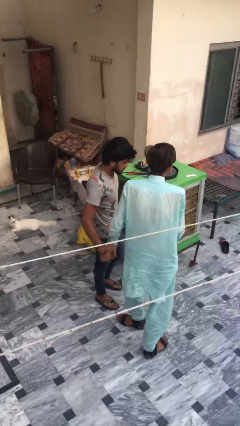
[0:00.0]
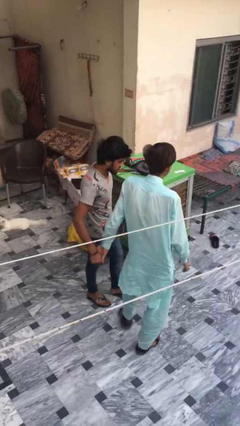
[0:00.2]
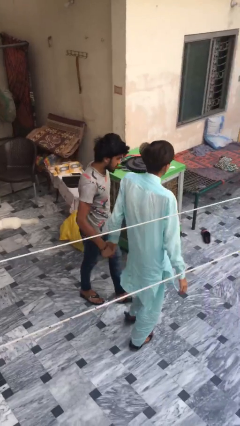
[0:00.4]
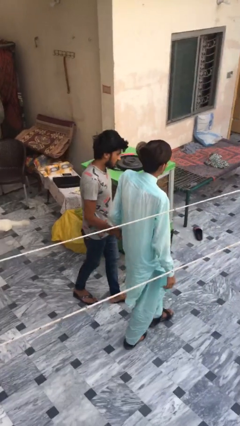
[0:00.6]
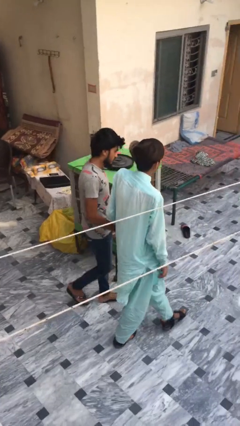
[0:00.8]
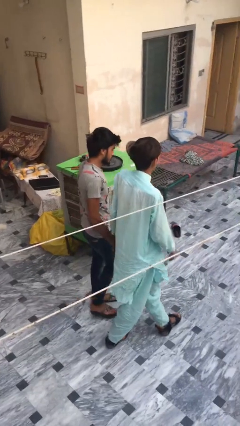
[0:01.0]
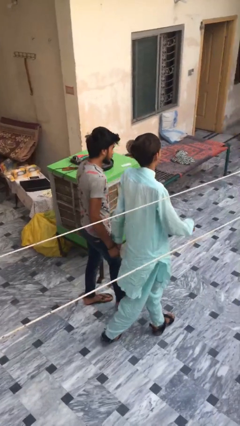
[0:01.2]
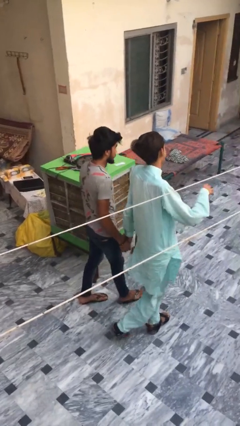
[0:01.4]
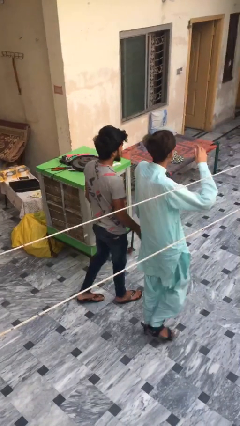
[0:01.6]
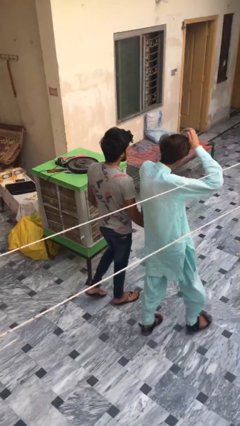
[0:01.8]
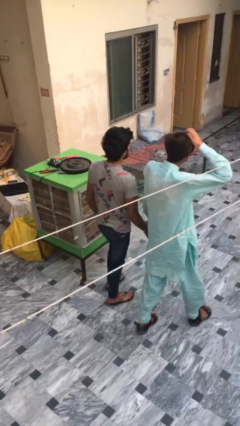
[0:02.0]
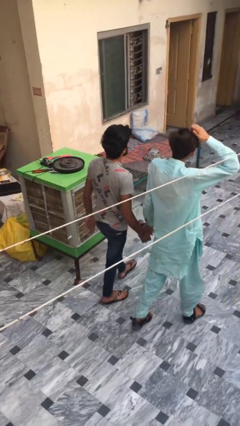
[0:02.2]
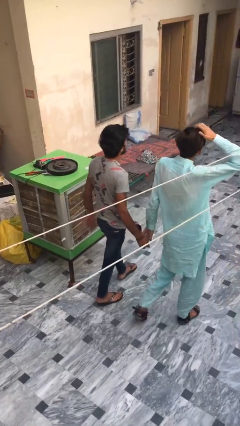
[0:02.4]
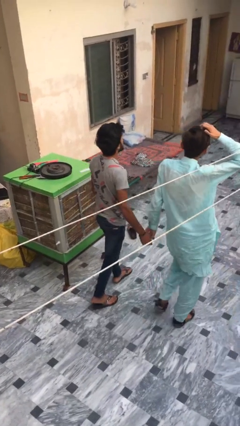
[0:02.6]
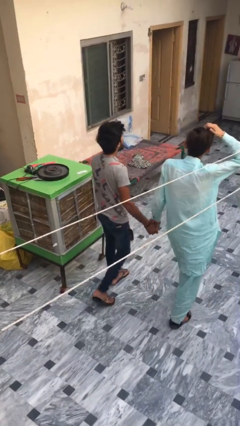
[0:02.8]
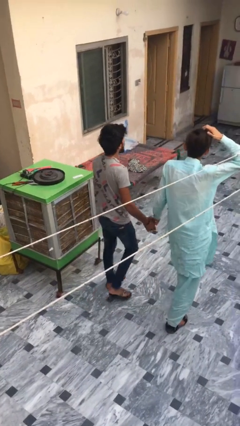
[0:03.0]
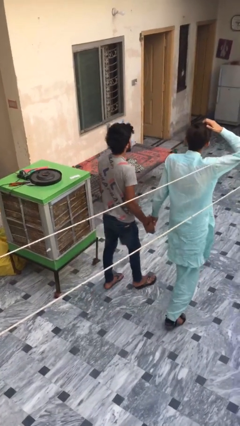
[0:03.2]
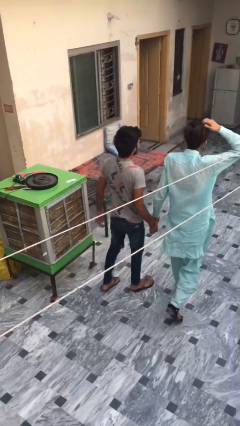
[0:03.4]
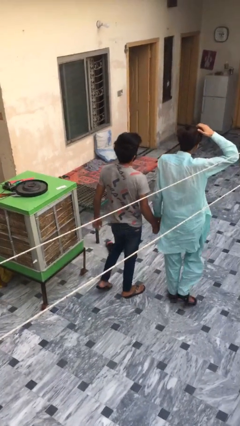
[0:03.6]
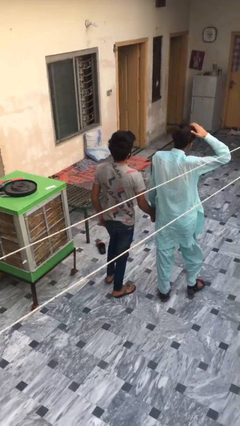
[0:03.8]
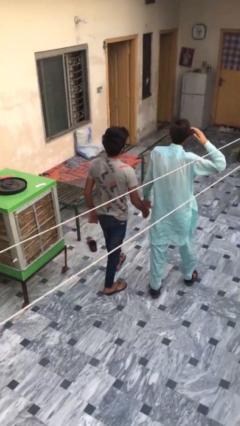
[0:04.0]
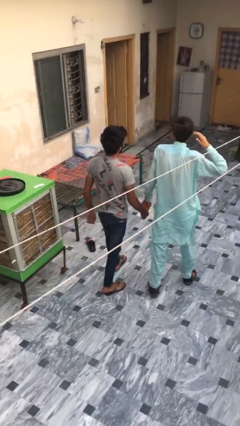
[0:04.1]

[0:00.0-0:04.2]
person talks to person

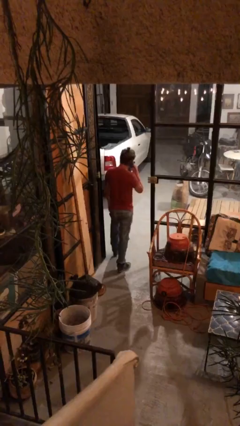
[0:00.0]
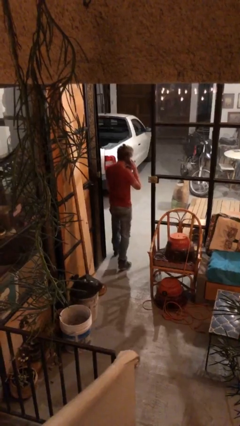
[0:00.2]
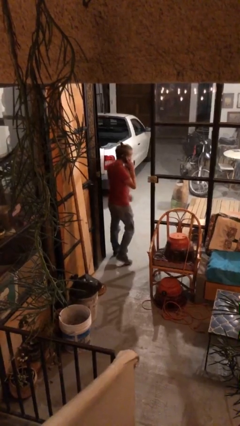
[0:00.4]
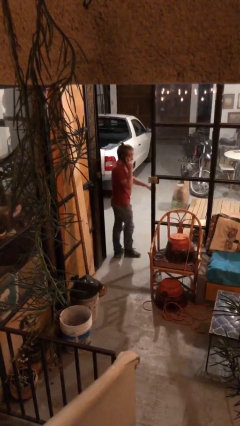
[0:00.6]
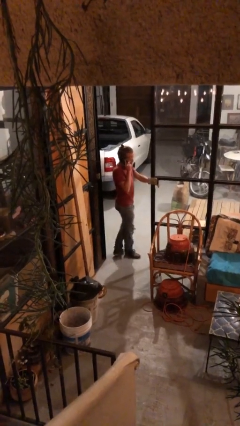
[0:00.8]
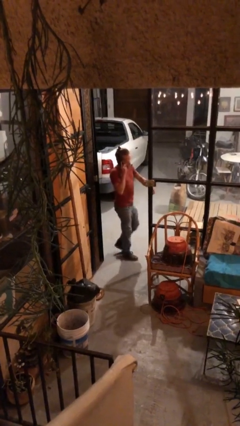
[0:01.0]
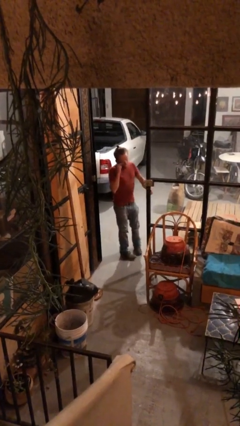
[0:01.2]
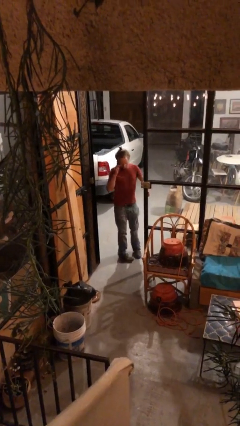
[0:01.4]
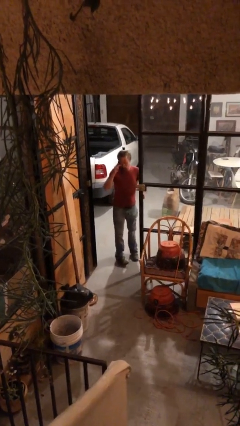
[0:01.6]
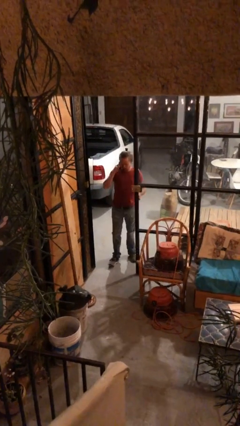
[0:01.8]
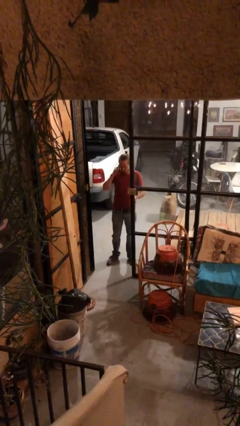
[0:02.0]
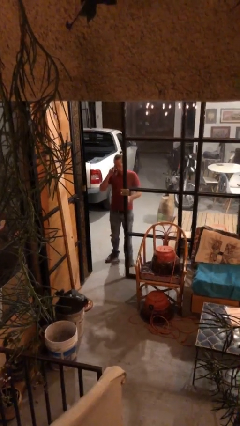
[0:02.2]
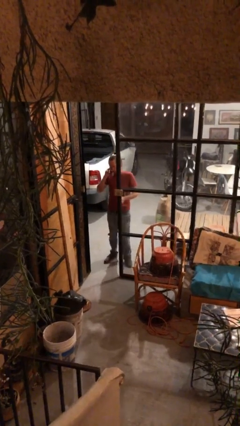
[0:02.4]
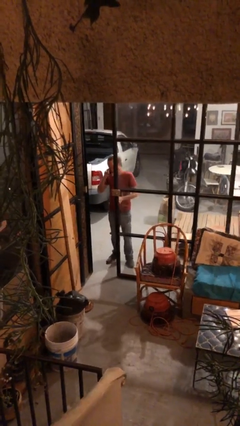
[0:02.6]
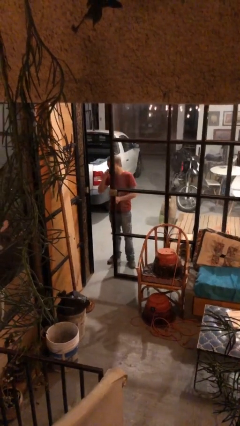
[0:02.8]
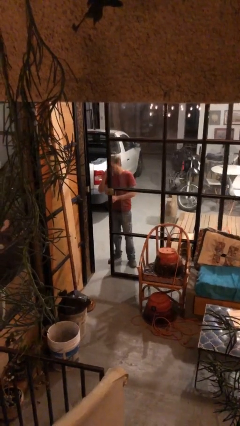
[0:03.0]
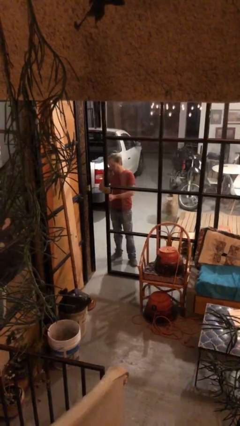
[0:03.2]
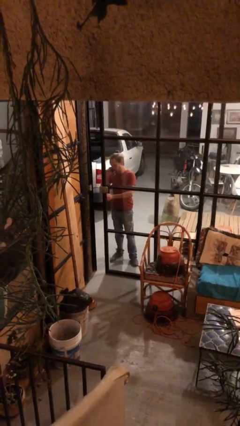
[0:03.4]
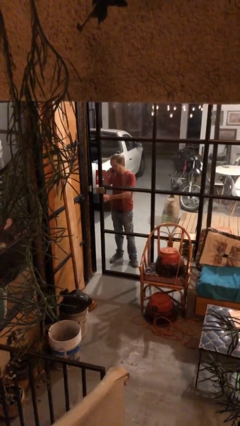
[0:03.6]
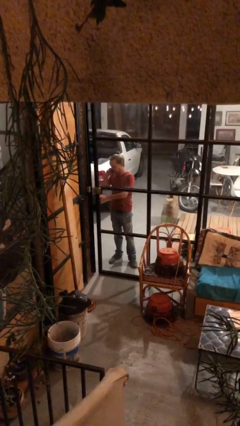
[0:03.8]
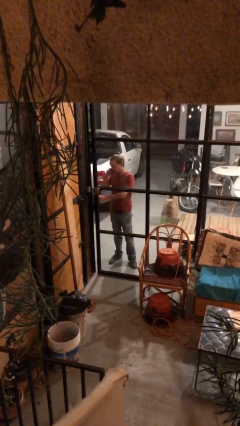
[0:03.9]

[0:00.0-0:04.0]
person closes facility door

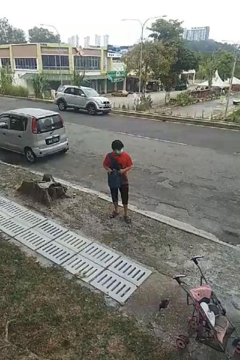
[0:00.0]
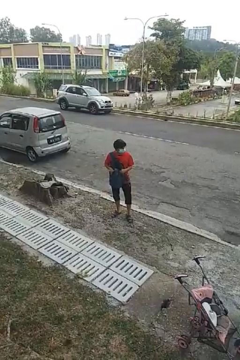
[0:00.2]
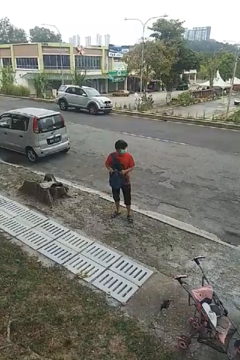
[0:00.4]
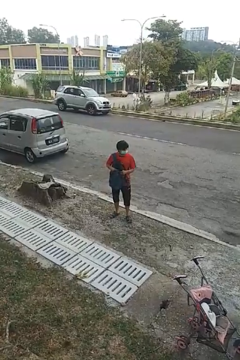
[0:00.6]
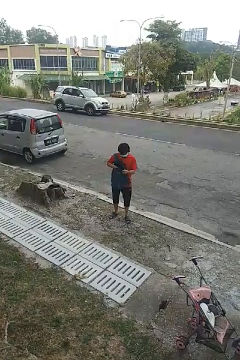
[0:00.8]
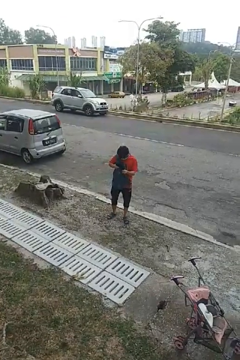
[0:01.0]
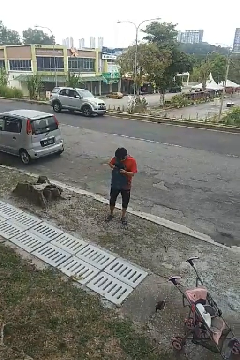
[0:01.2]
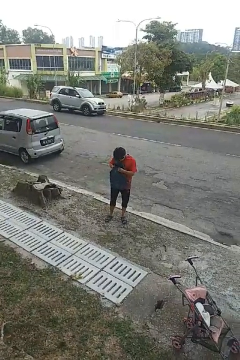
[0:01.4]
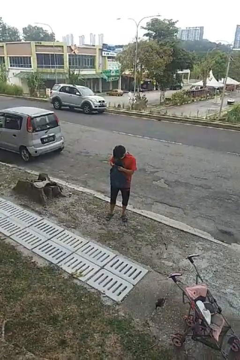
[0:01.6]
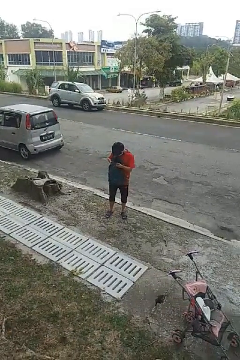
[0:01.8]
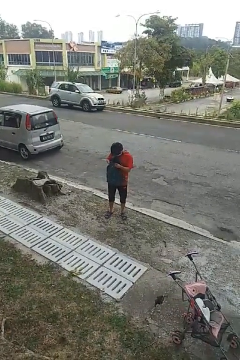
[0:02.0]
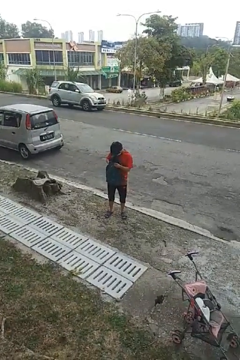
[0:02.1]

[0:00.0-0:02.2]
person searches in backpack

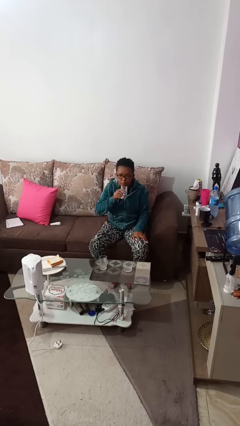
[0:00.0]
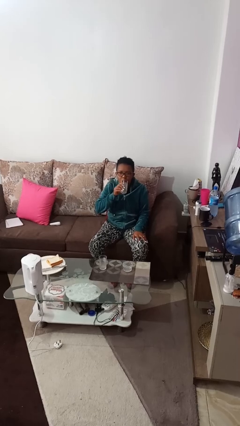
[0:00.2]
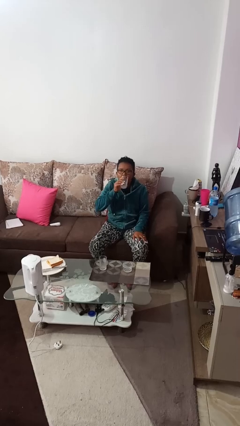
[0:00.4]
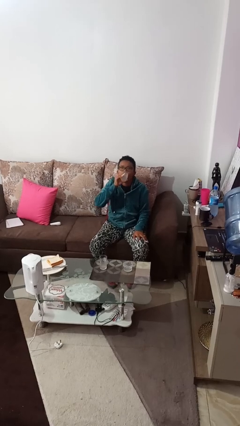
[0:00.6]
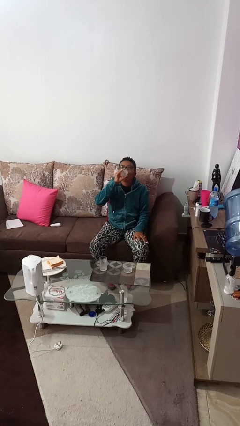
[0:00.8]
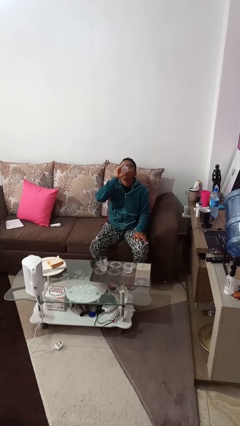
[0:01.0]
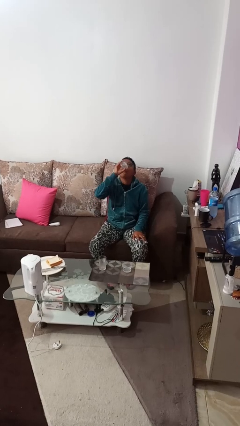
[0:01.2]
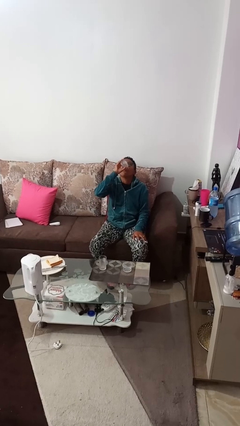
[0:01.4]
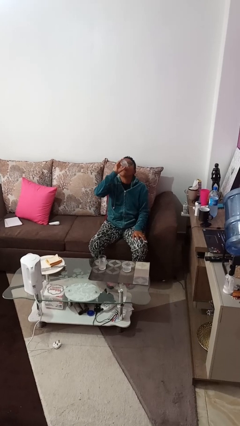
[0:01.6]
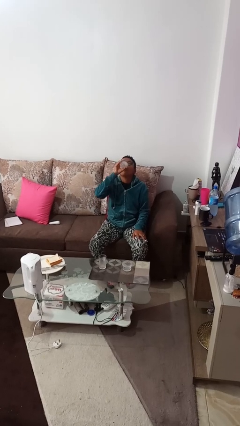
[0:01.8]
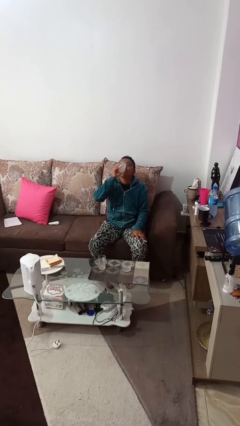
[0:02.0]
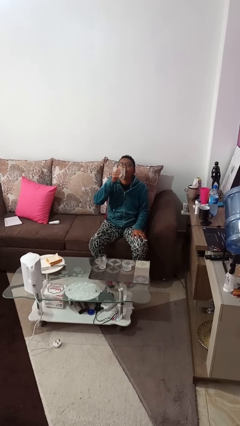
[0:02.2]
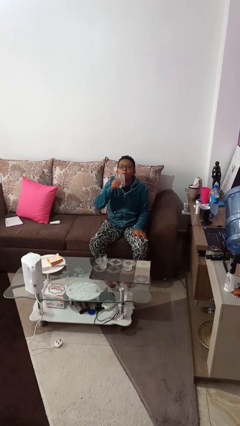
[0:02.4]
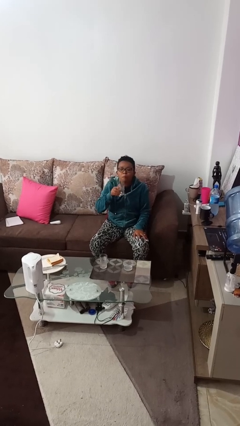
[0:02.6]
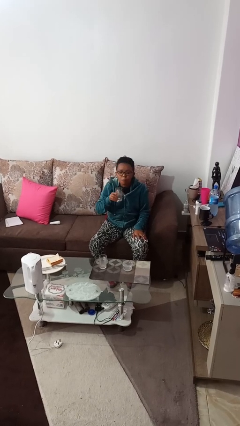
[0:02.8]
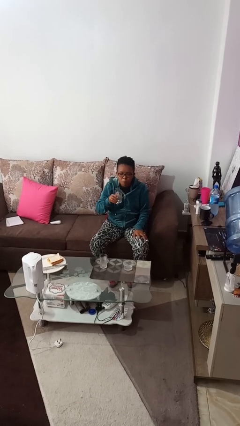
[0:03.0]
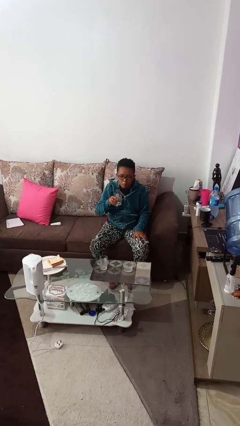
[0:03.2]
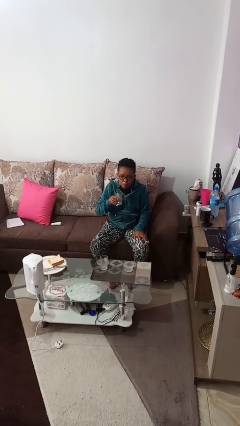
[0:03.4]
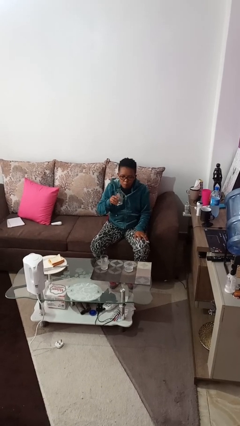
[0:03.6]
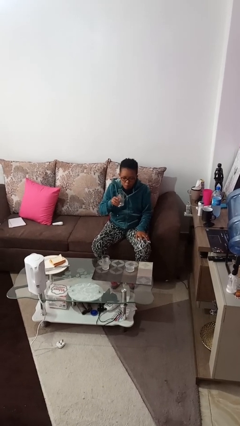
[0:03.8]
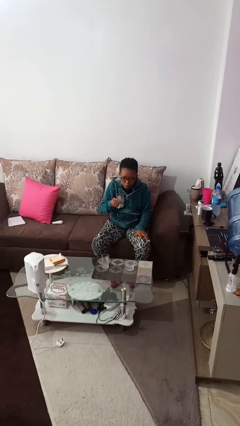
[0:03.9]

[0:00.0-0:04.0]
person drinks from shotglass

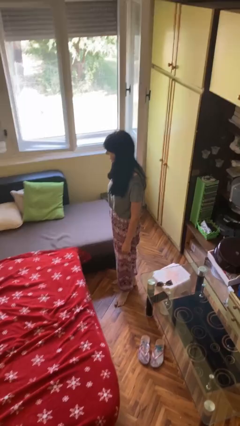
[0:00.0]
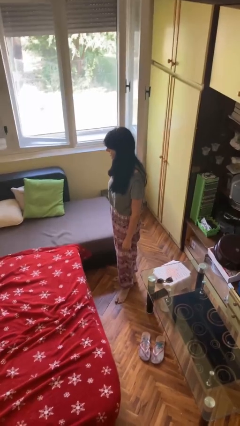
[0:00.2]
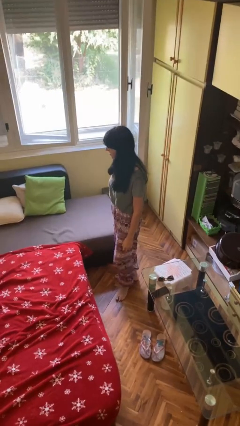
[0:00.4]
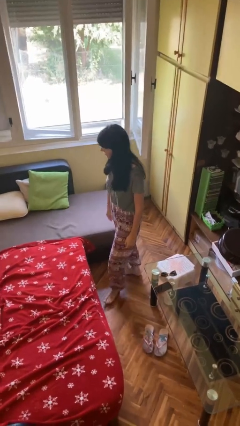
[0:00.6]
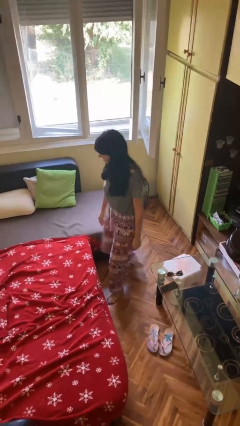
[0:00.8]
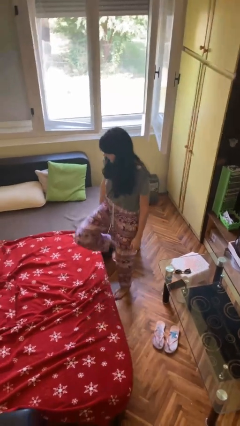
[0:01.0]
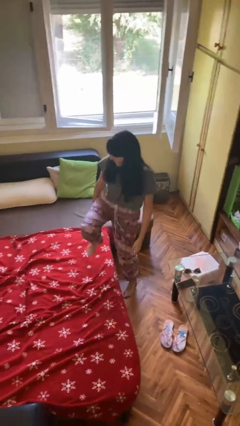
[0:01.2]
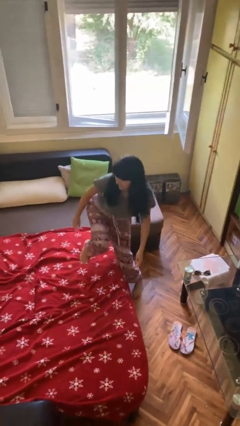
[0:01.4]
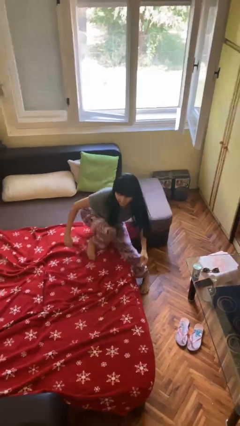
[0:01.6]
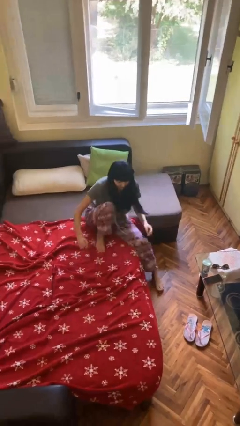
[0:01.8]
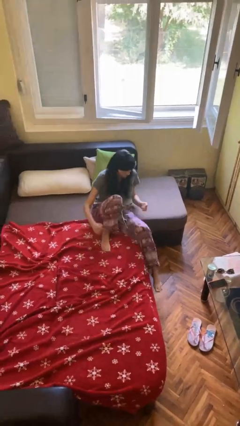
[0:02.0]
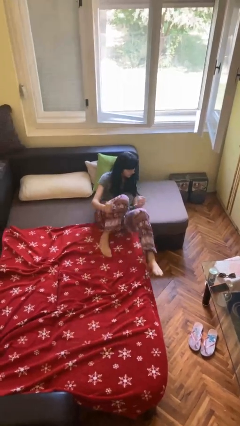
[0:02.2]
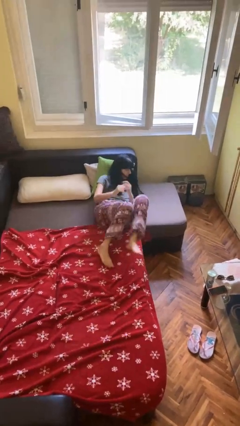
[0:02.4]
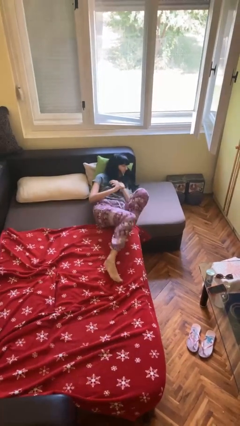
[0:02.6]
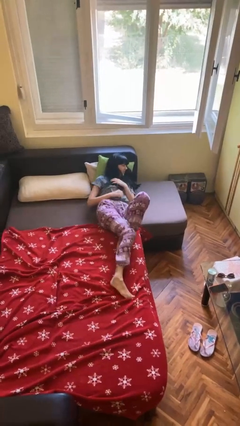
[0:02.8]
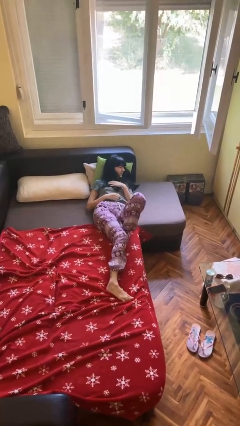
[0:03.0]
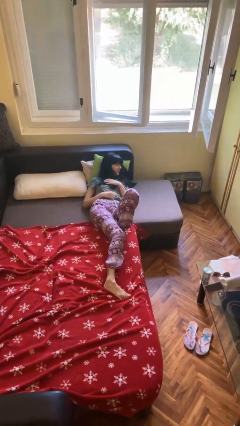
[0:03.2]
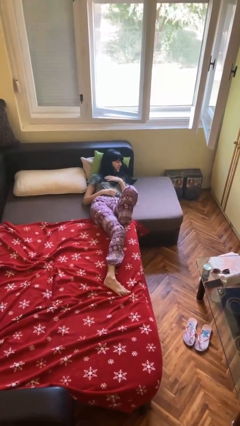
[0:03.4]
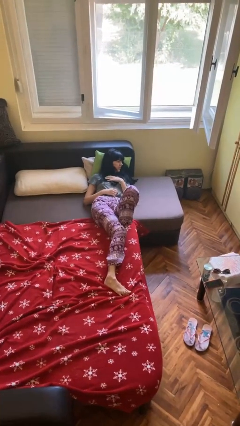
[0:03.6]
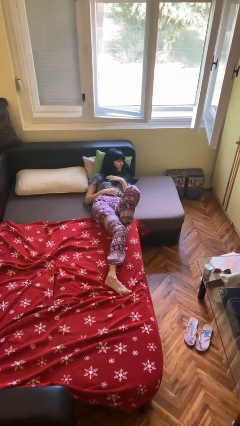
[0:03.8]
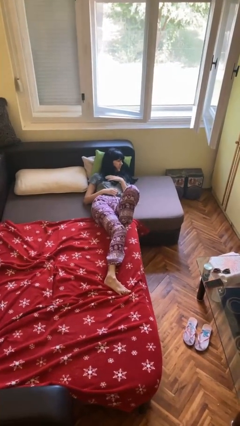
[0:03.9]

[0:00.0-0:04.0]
person lies down on bed
